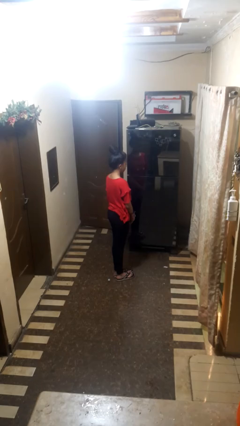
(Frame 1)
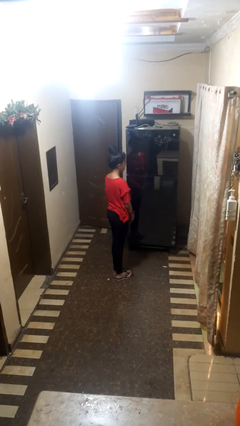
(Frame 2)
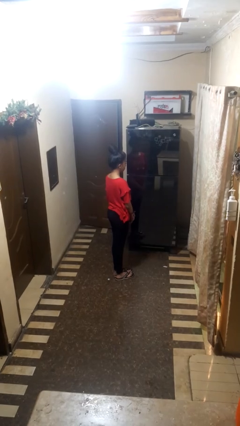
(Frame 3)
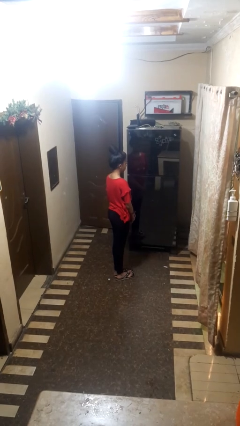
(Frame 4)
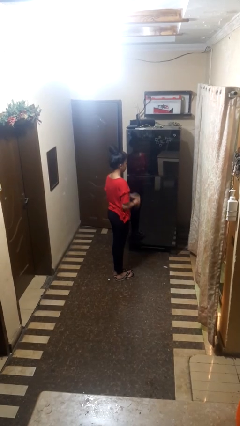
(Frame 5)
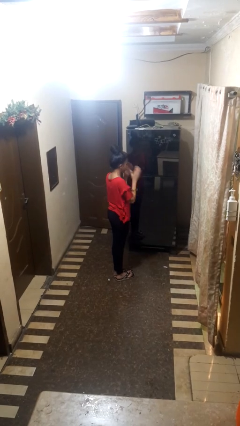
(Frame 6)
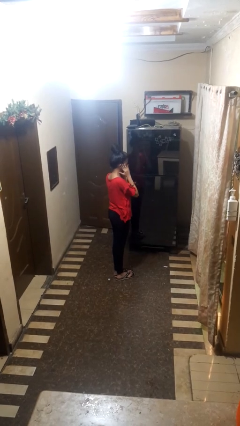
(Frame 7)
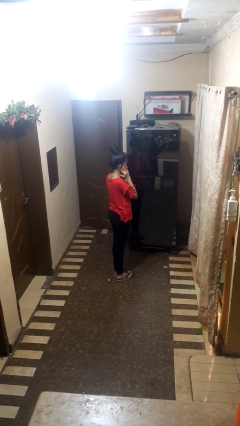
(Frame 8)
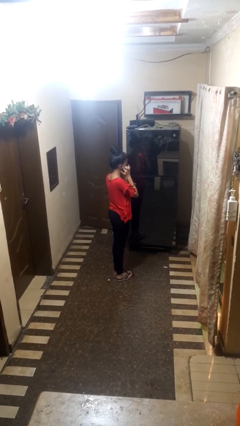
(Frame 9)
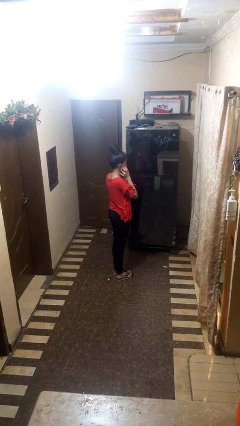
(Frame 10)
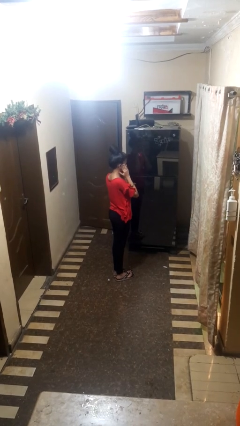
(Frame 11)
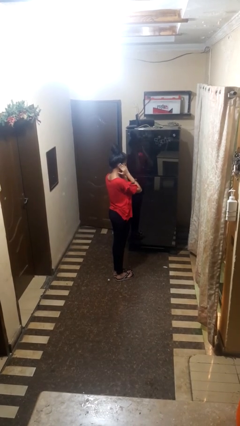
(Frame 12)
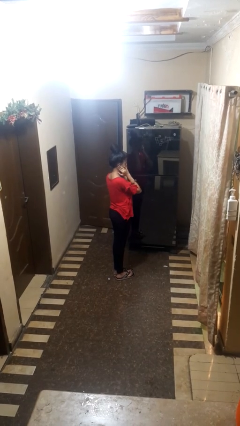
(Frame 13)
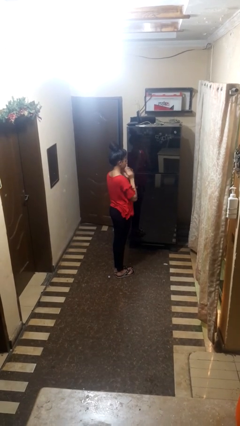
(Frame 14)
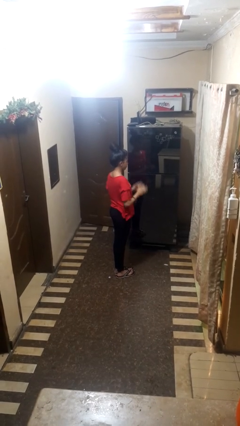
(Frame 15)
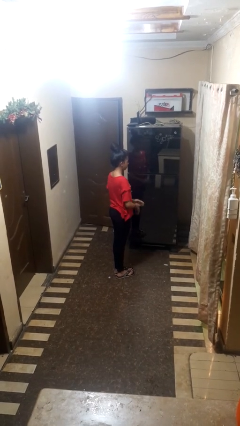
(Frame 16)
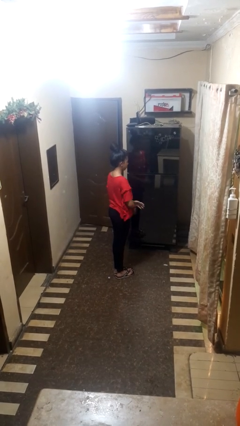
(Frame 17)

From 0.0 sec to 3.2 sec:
person touches earlobe

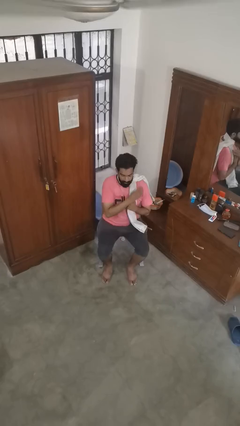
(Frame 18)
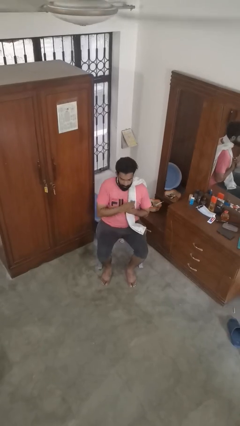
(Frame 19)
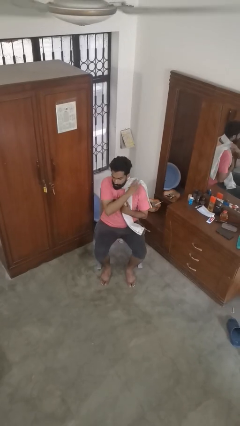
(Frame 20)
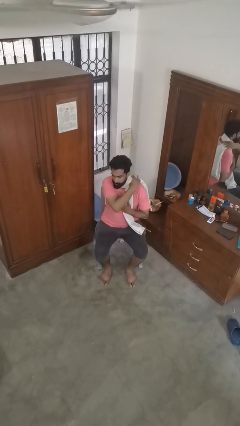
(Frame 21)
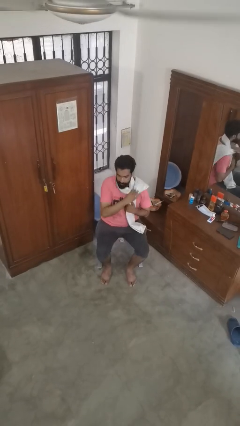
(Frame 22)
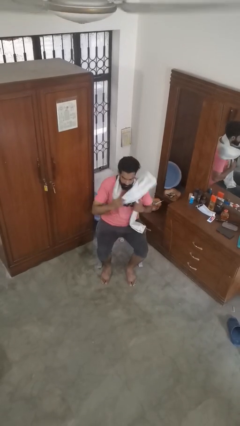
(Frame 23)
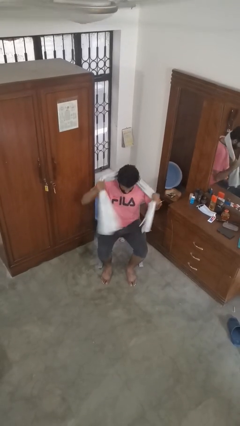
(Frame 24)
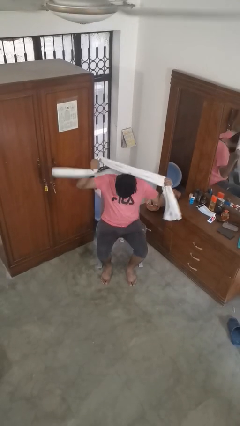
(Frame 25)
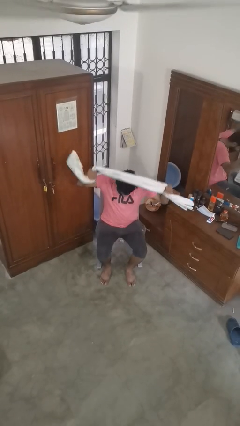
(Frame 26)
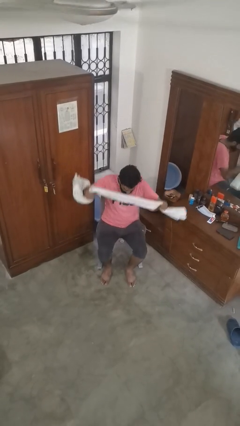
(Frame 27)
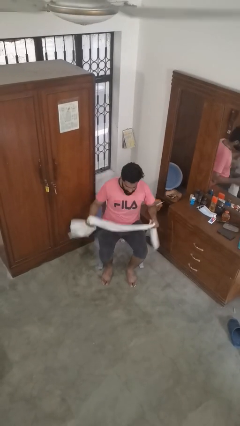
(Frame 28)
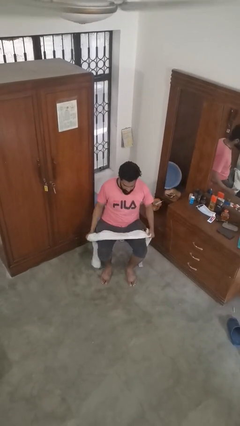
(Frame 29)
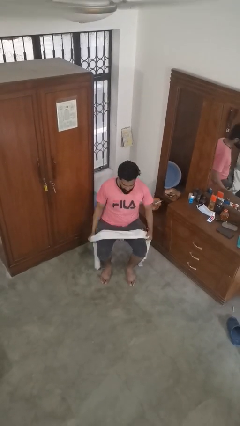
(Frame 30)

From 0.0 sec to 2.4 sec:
person takes off scarf

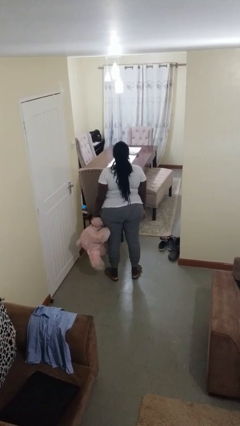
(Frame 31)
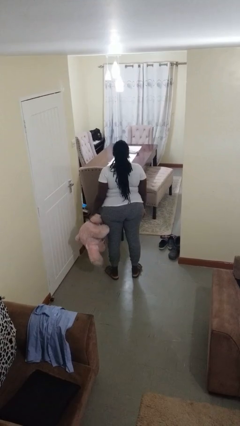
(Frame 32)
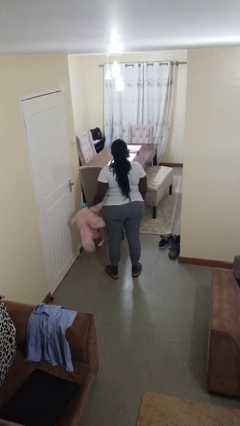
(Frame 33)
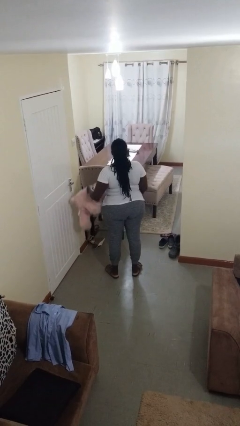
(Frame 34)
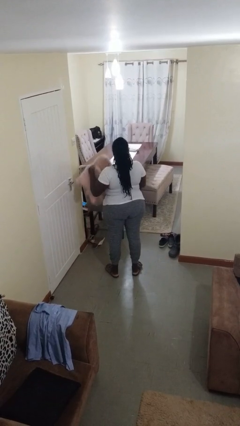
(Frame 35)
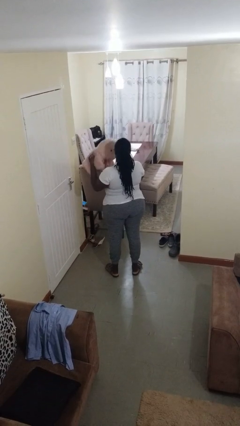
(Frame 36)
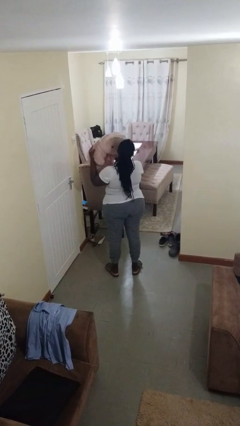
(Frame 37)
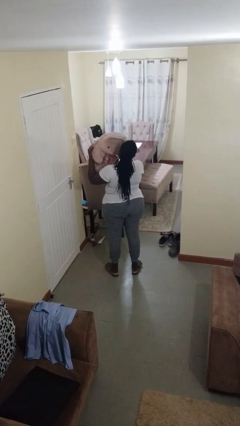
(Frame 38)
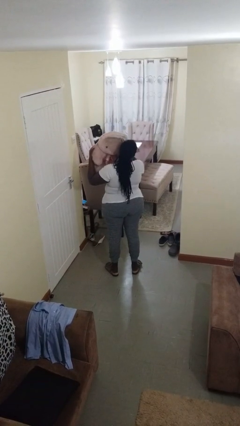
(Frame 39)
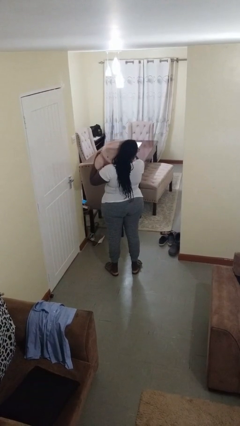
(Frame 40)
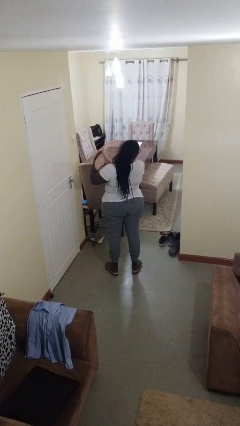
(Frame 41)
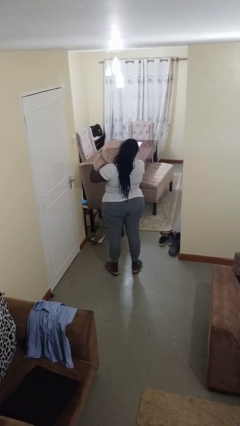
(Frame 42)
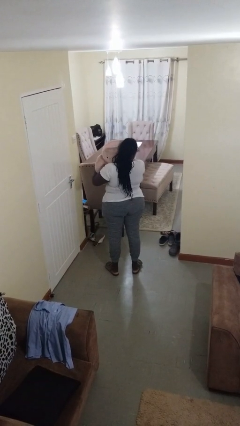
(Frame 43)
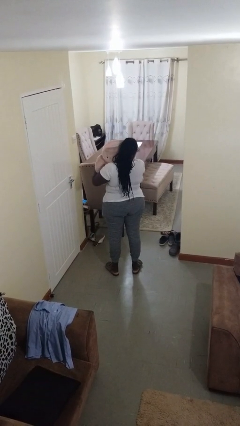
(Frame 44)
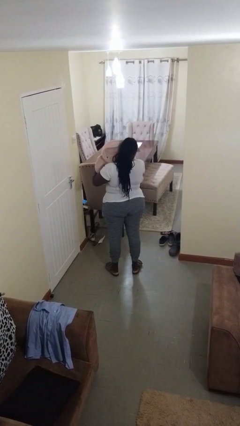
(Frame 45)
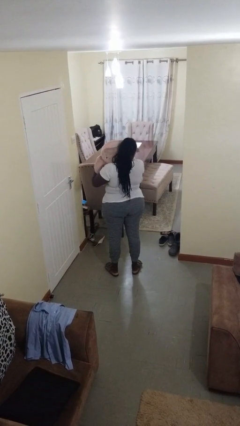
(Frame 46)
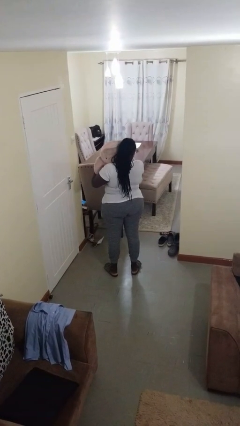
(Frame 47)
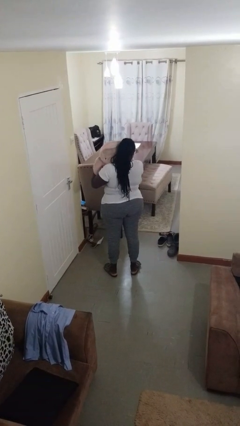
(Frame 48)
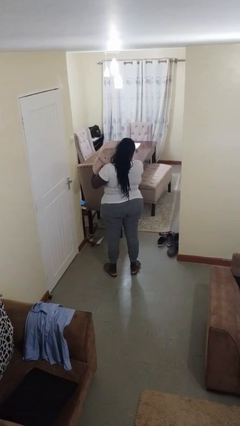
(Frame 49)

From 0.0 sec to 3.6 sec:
person hugs stuffed animal

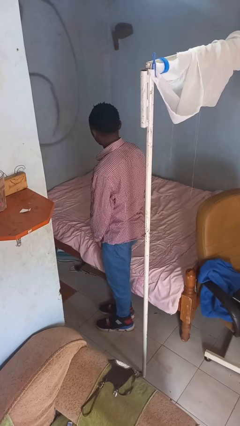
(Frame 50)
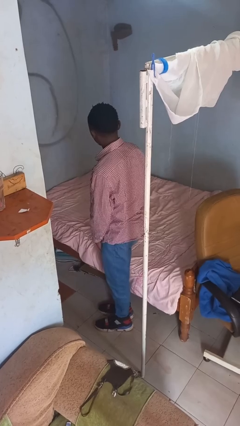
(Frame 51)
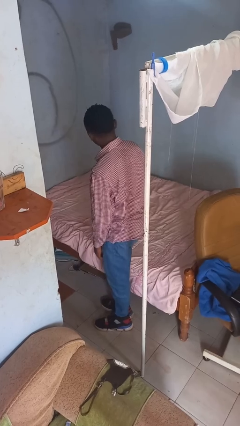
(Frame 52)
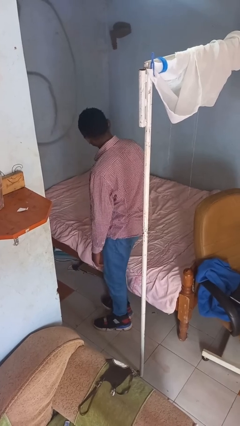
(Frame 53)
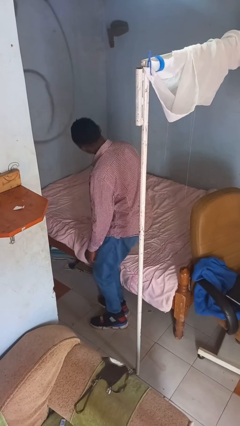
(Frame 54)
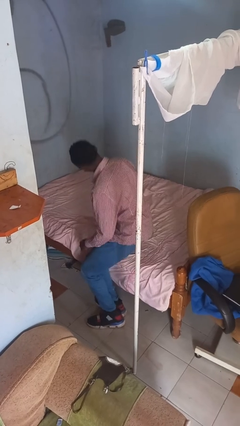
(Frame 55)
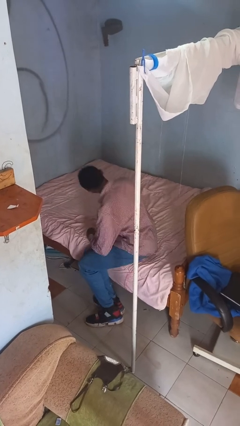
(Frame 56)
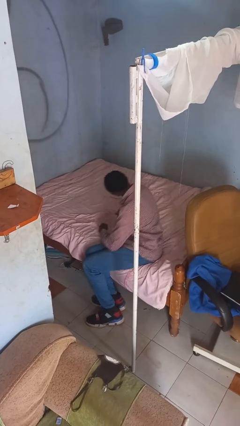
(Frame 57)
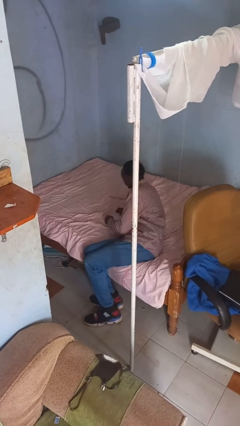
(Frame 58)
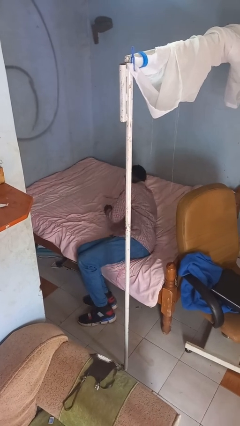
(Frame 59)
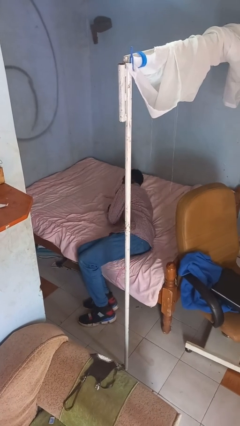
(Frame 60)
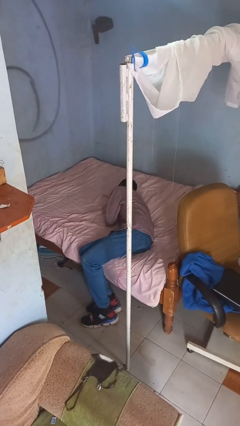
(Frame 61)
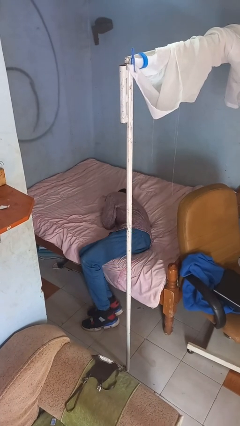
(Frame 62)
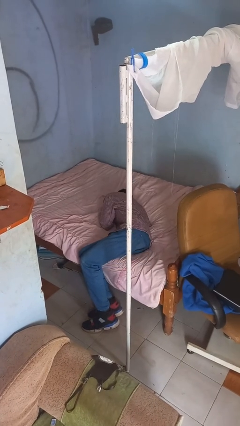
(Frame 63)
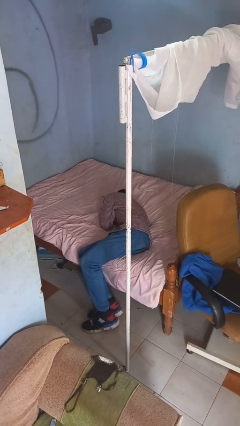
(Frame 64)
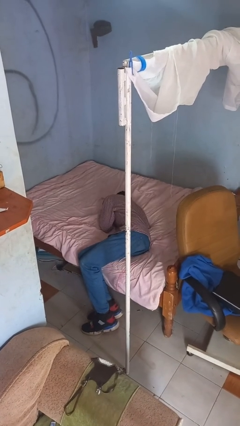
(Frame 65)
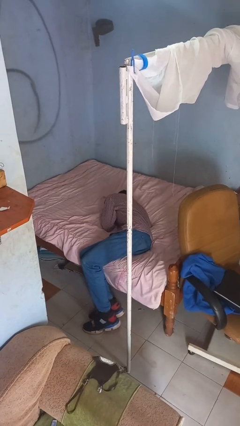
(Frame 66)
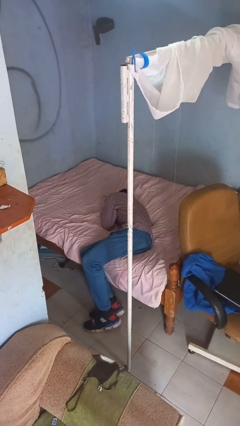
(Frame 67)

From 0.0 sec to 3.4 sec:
person lies down on bed

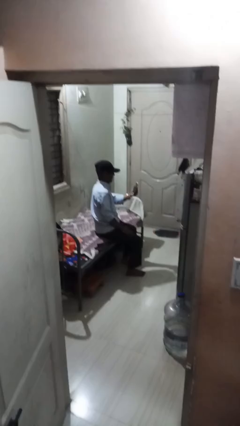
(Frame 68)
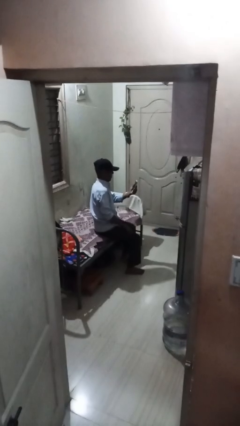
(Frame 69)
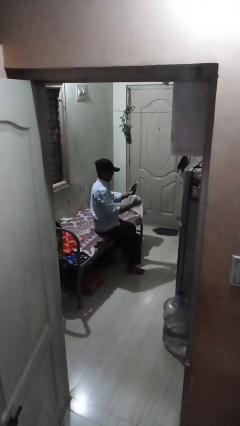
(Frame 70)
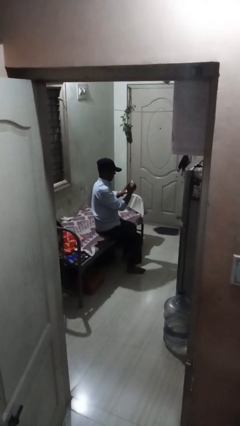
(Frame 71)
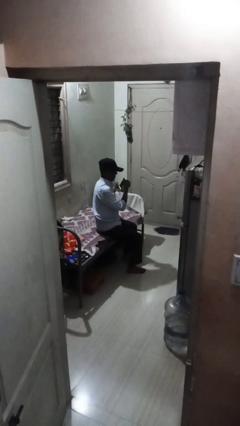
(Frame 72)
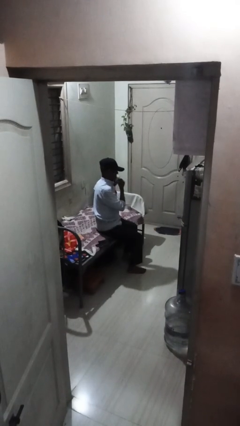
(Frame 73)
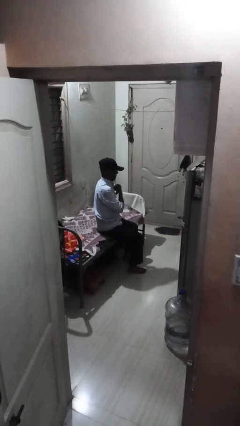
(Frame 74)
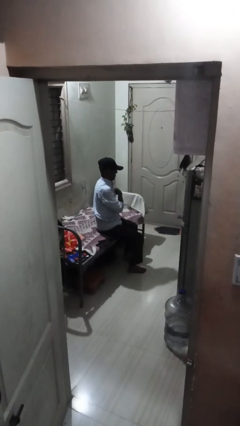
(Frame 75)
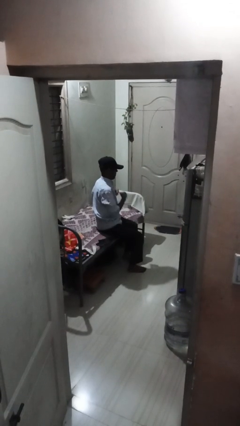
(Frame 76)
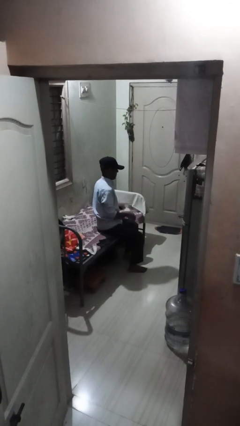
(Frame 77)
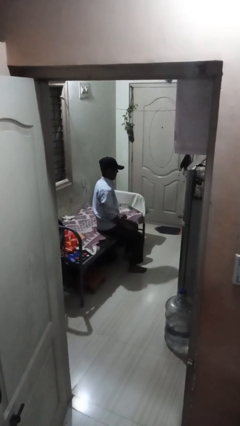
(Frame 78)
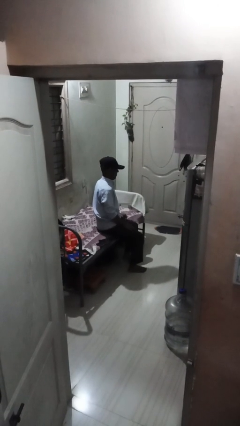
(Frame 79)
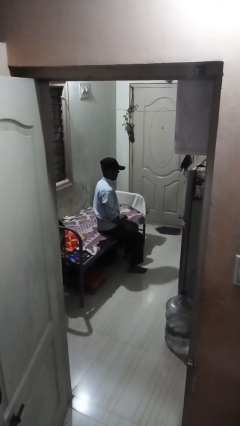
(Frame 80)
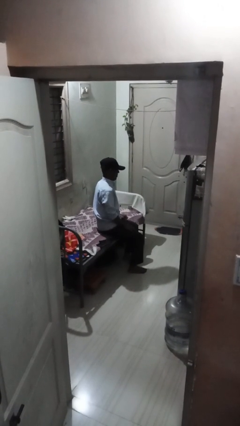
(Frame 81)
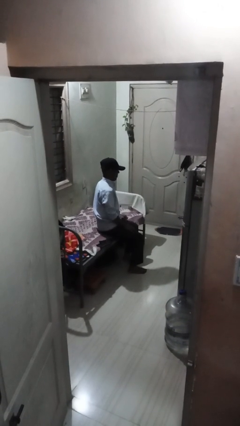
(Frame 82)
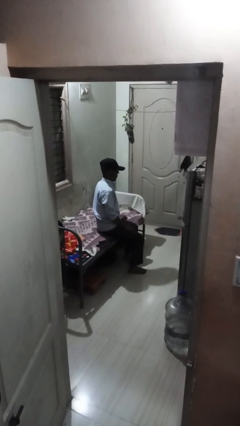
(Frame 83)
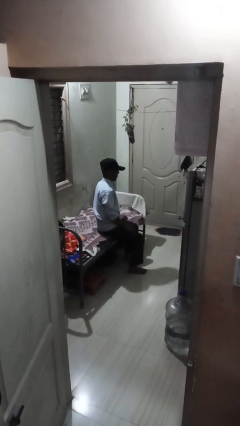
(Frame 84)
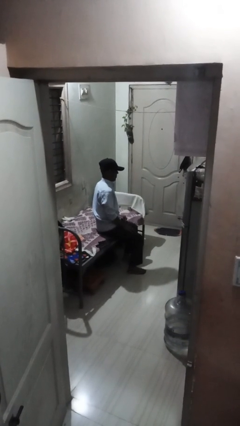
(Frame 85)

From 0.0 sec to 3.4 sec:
person puts phone into pocket

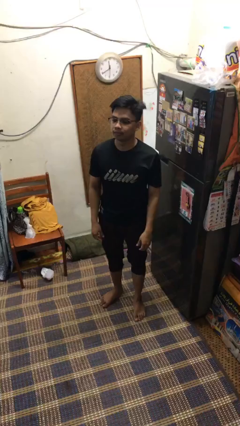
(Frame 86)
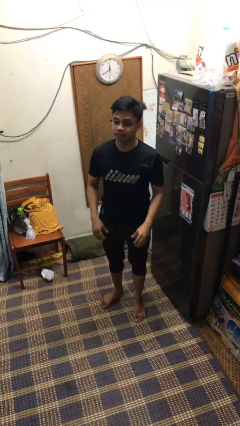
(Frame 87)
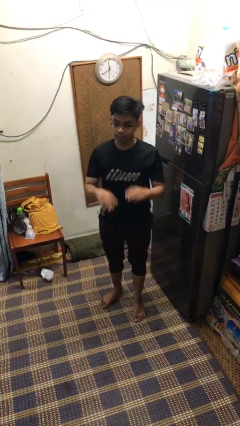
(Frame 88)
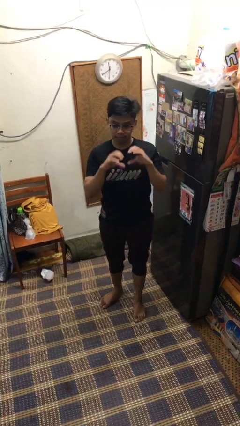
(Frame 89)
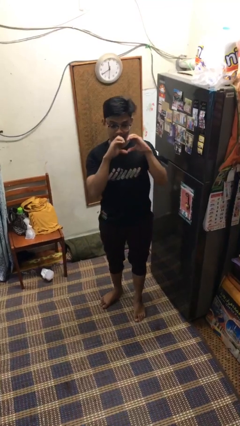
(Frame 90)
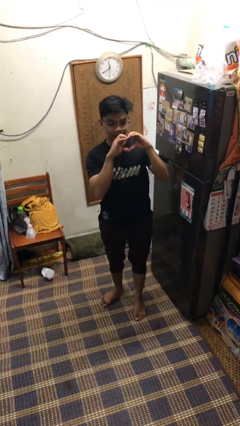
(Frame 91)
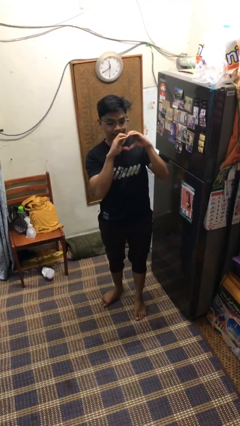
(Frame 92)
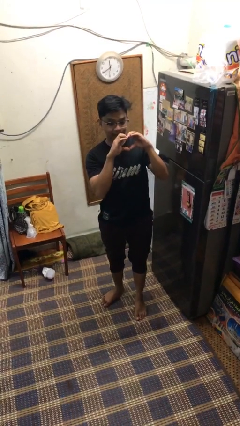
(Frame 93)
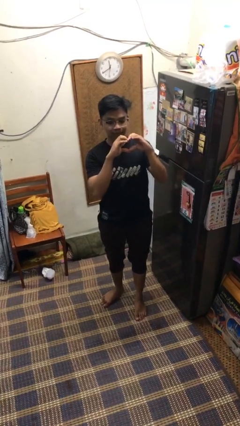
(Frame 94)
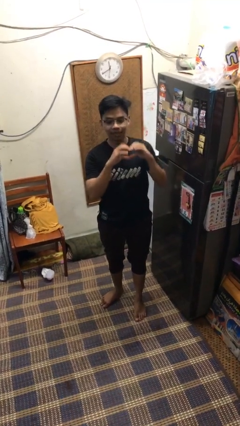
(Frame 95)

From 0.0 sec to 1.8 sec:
person gestures heart
